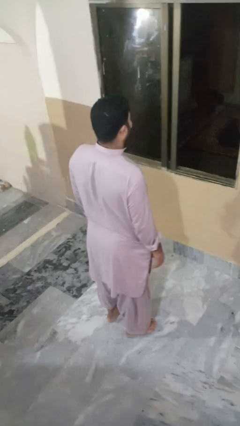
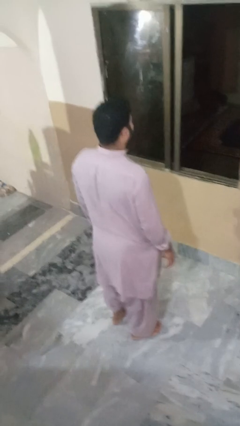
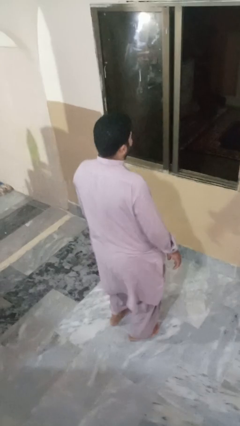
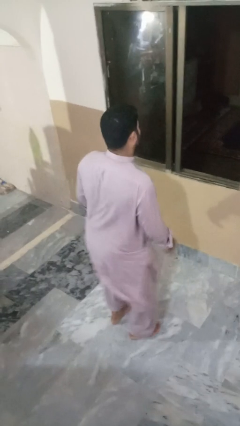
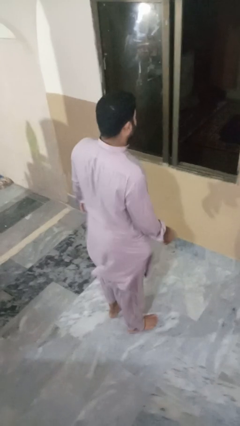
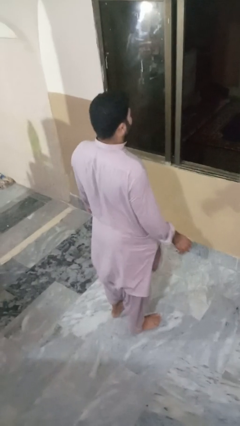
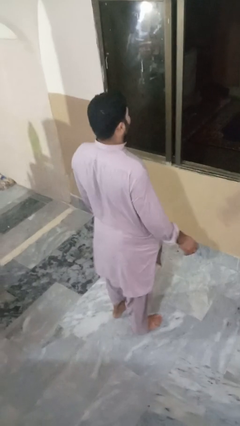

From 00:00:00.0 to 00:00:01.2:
person wiggles hips

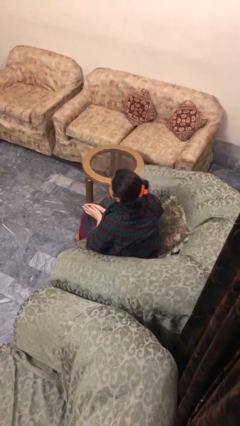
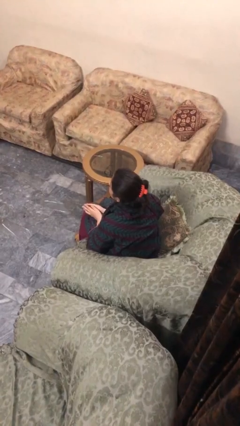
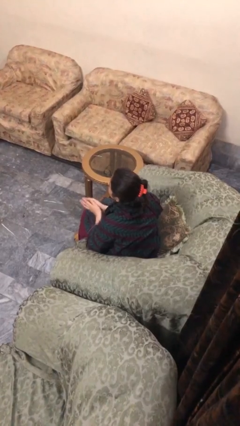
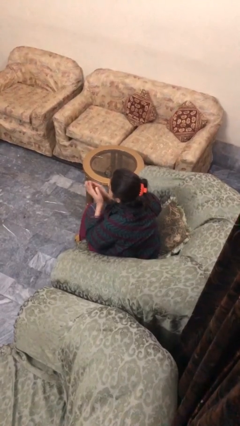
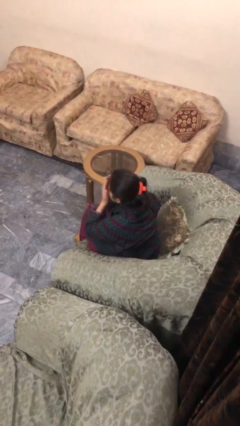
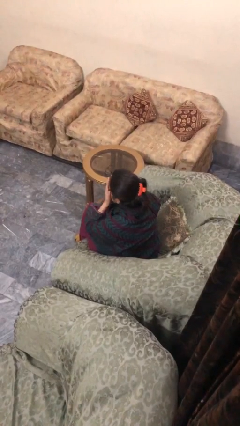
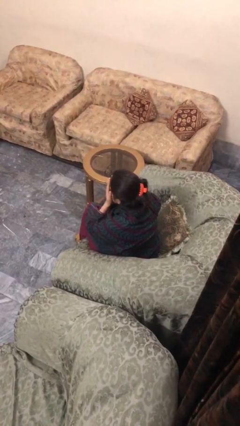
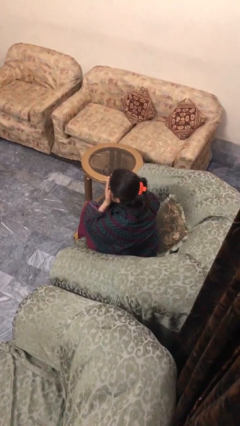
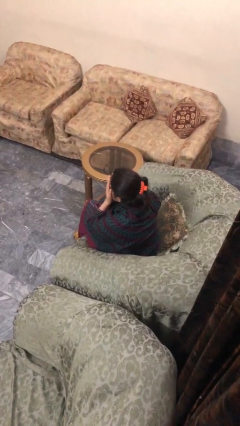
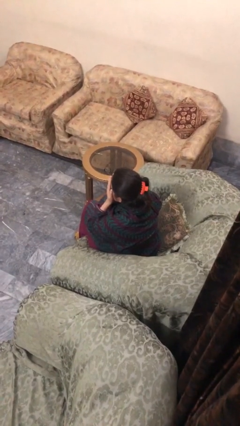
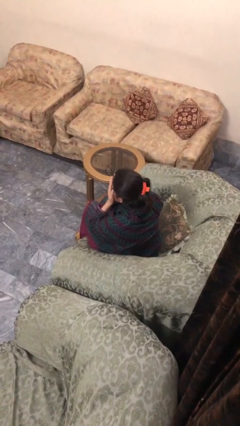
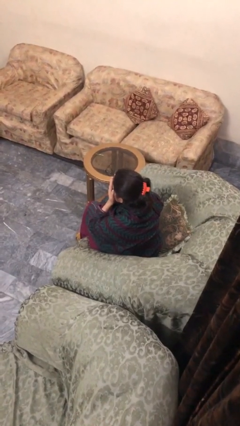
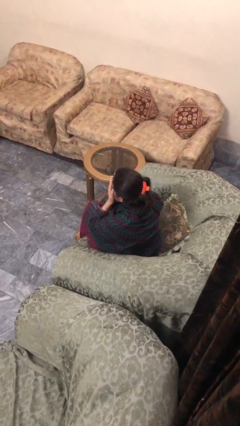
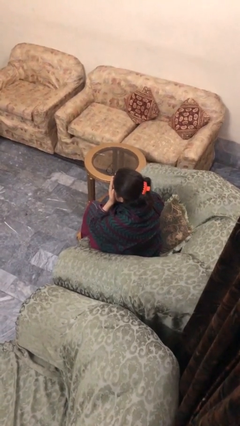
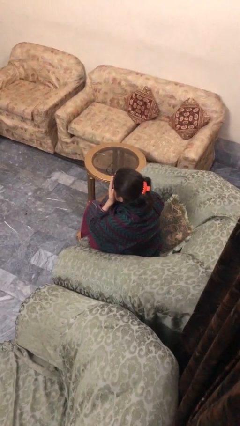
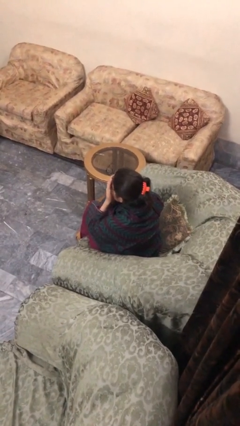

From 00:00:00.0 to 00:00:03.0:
person covers face with hands

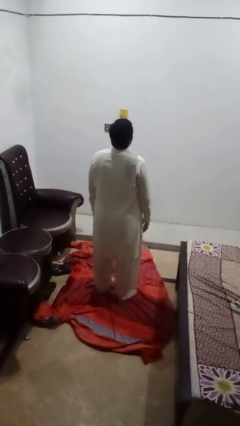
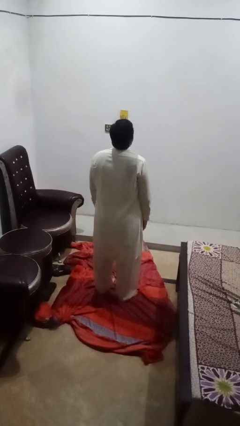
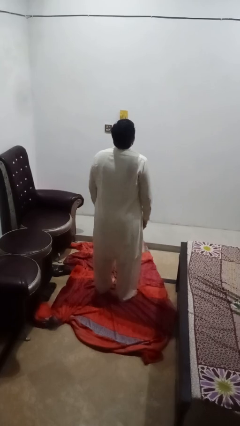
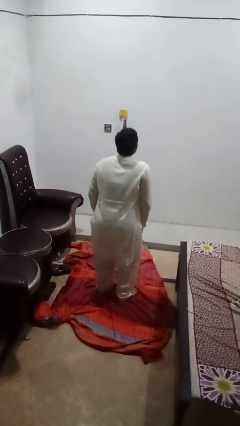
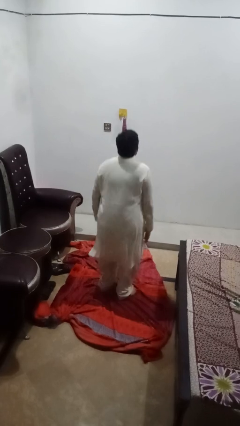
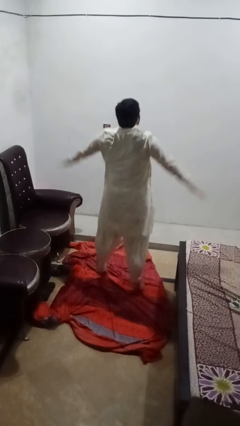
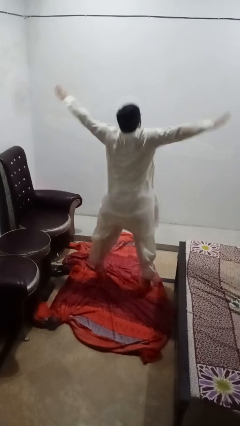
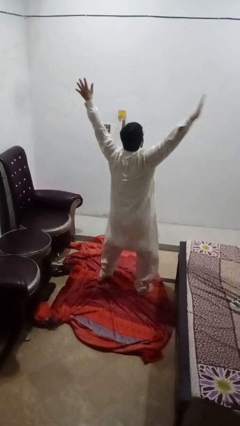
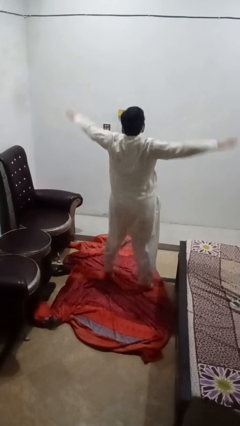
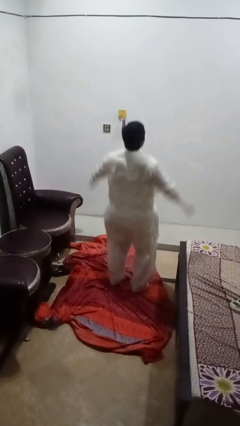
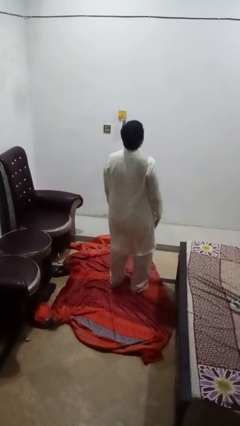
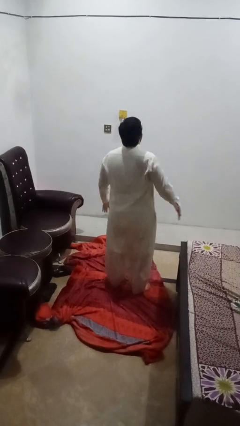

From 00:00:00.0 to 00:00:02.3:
person exercises with jumping jacks

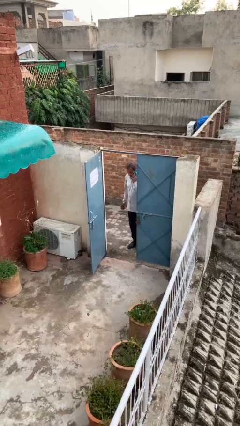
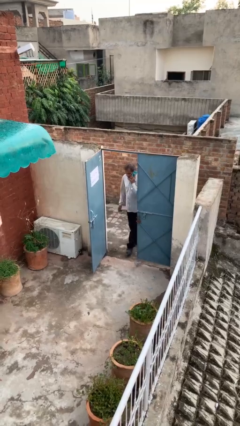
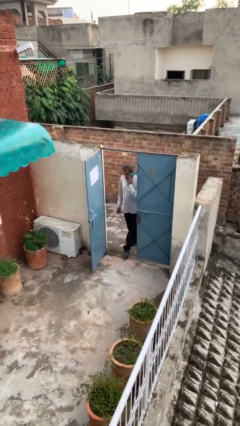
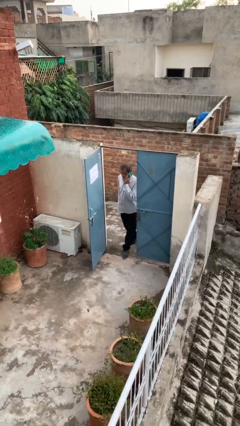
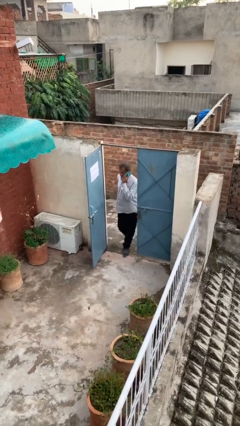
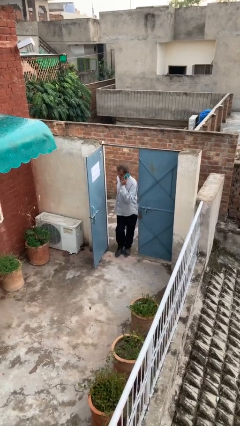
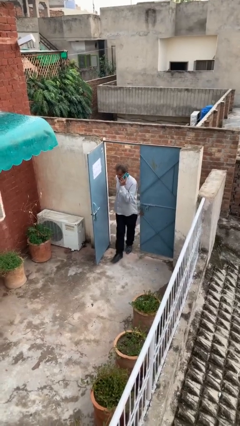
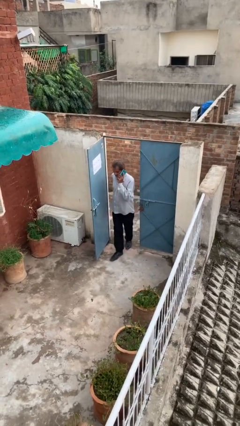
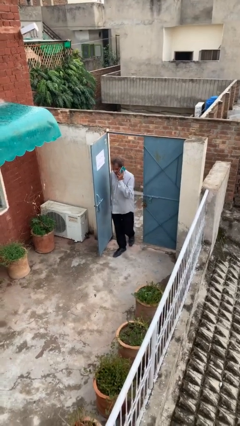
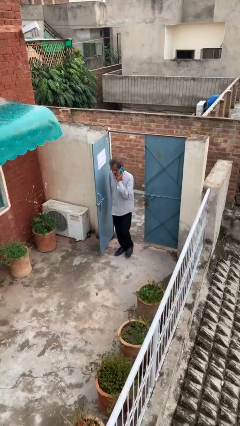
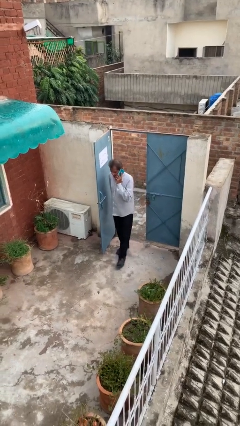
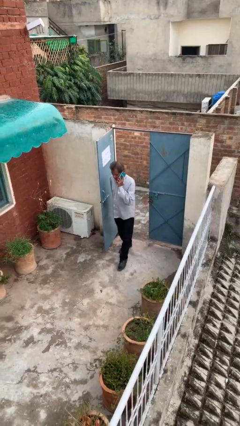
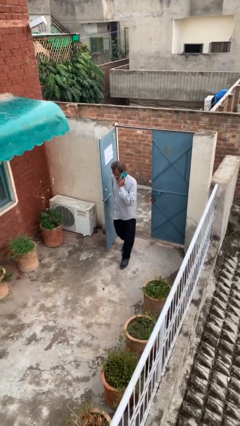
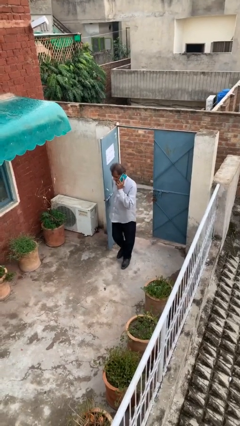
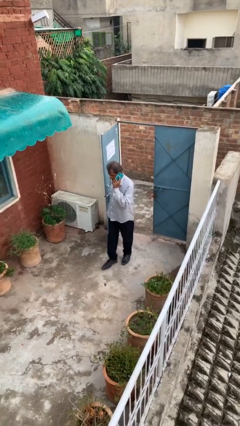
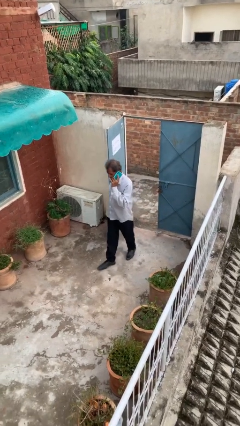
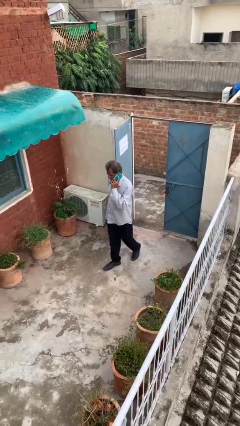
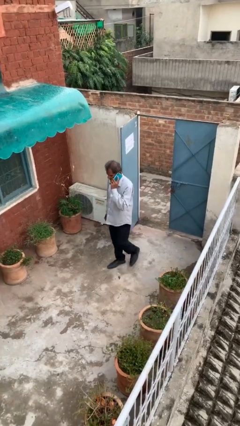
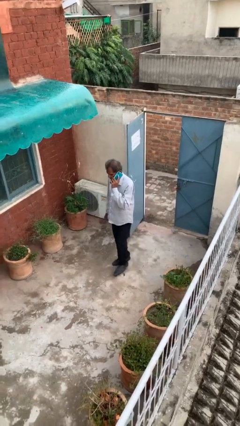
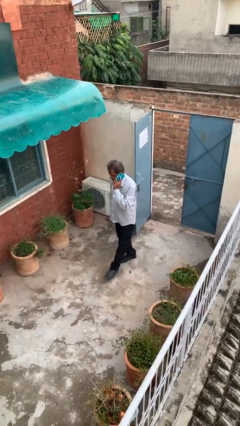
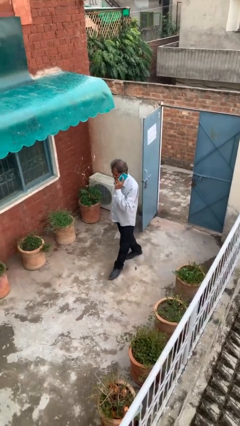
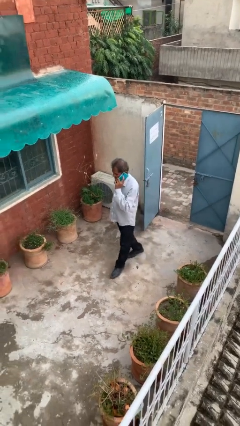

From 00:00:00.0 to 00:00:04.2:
person enters scene through structure

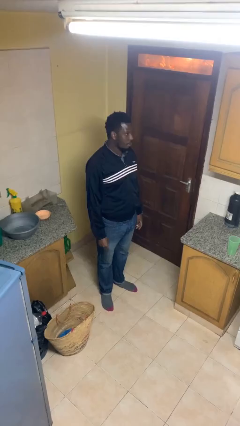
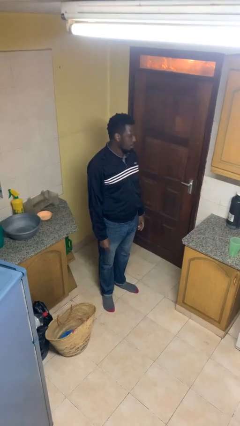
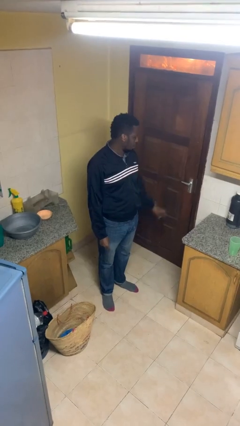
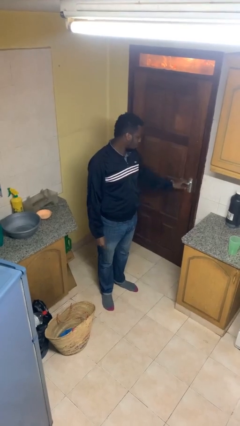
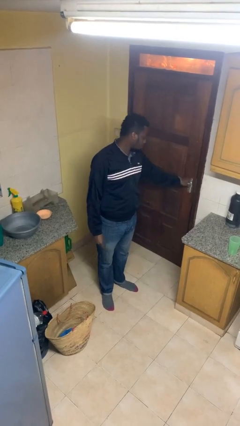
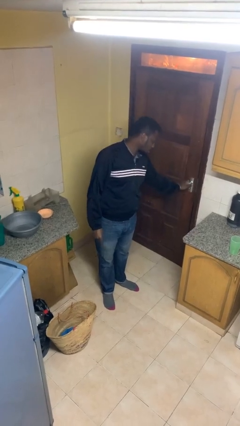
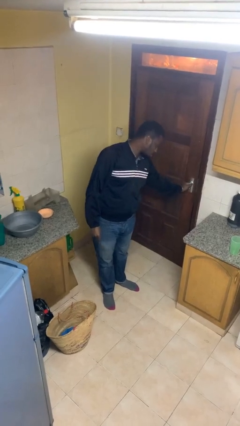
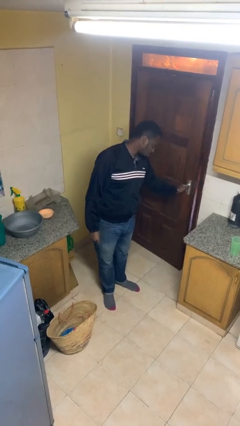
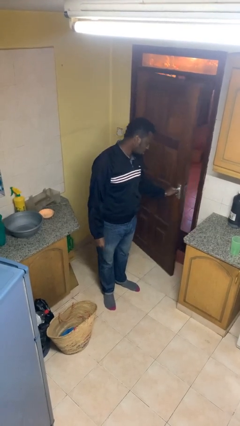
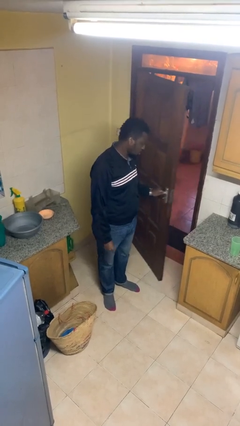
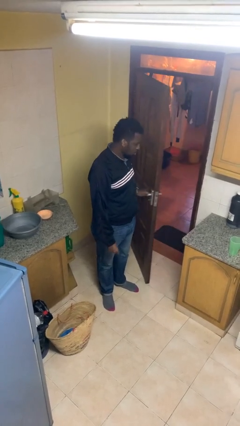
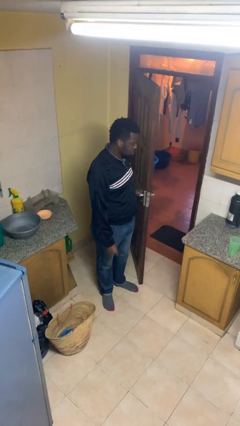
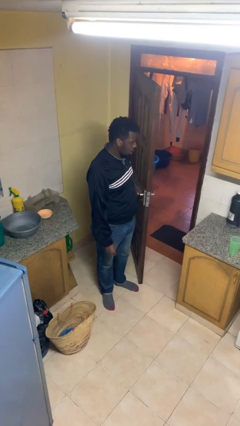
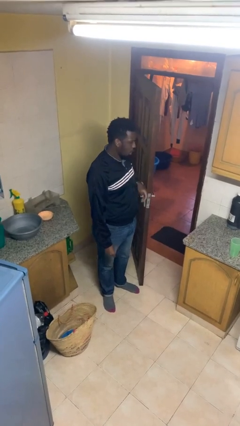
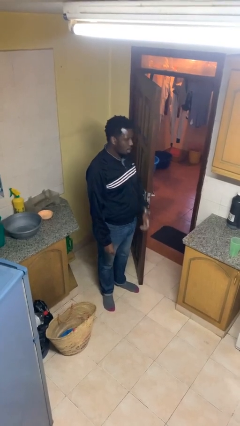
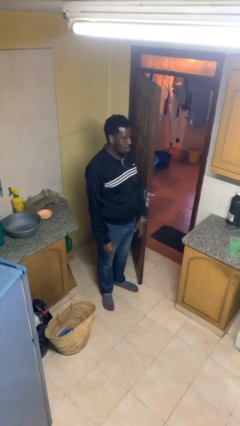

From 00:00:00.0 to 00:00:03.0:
person opens facility door

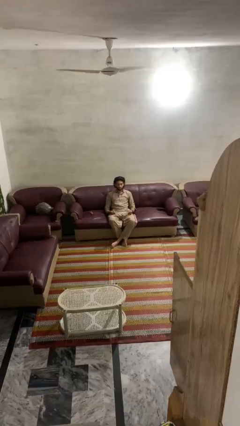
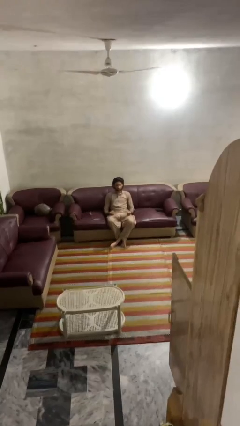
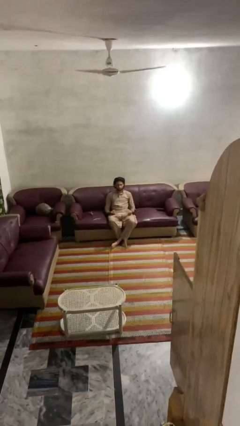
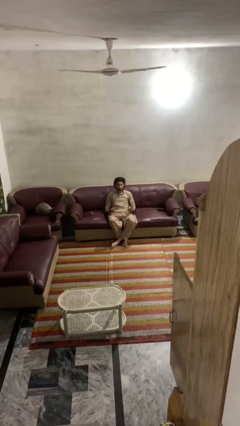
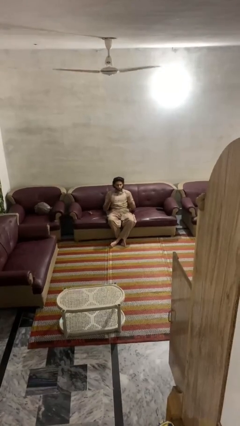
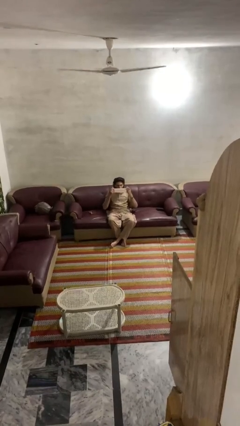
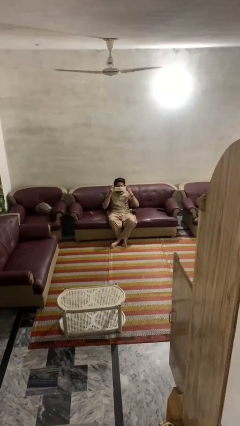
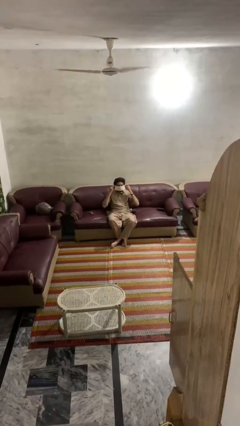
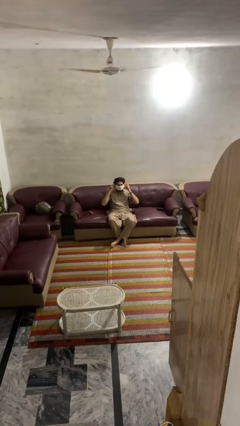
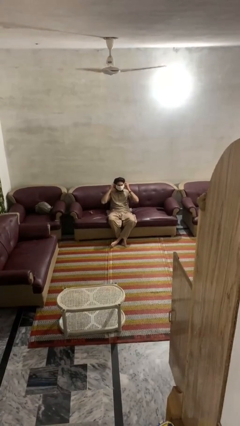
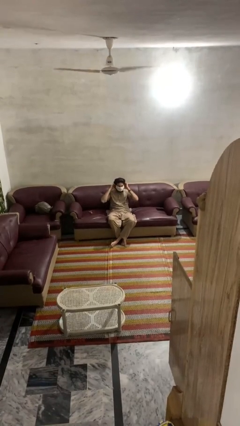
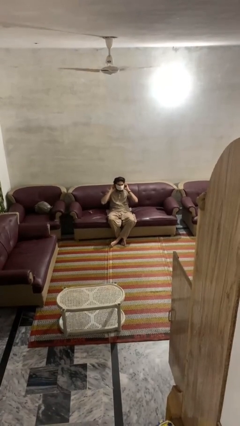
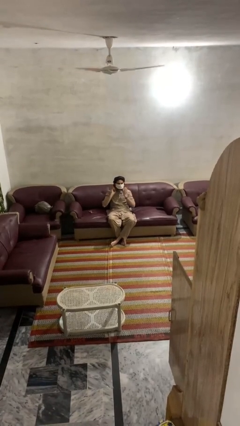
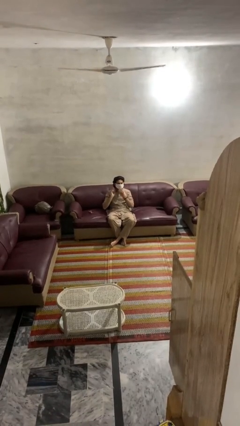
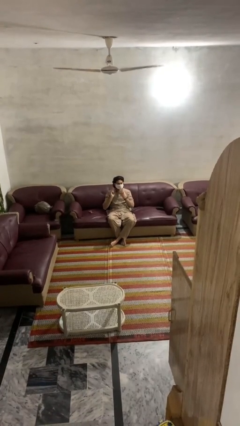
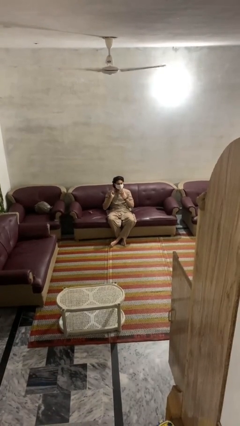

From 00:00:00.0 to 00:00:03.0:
person puts on facemask

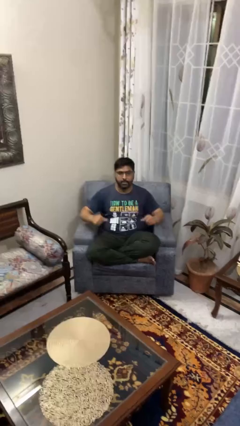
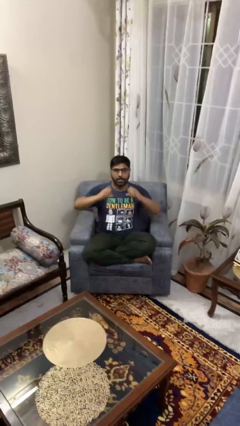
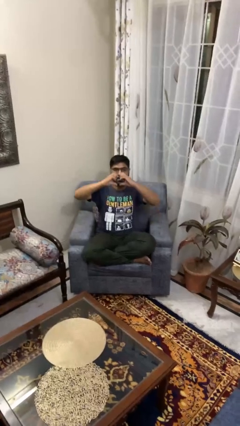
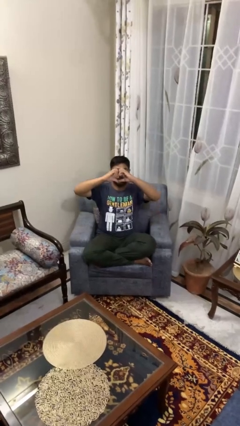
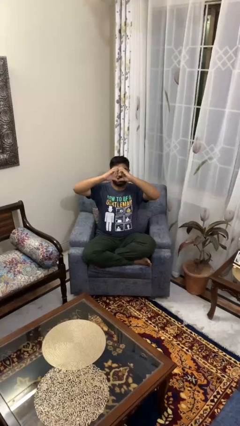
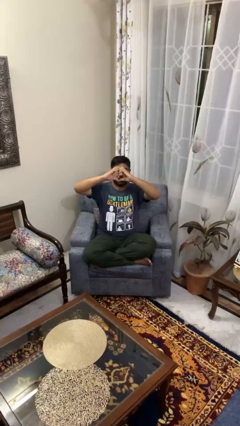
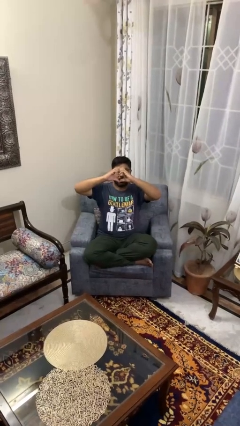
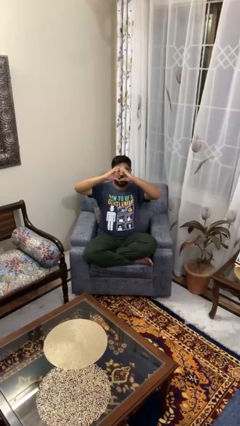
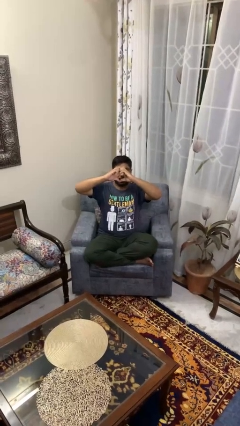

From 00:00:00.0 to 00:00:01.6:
person gestures heart
